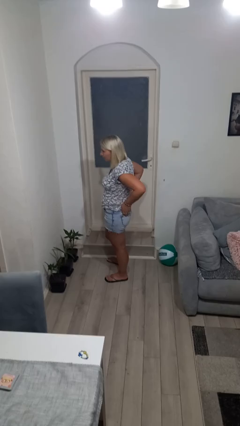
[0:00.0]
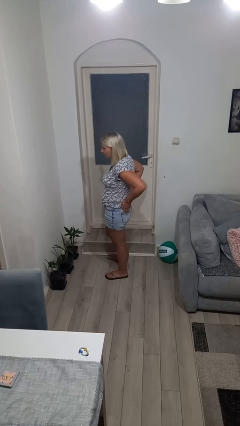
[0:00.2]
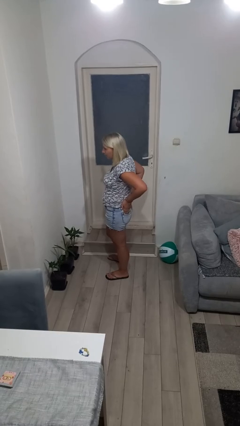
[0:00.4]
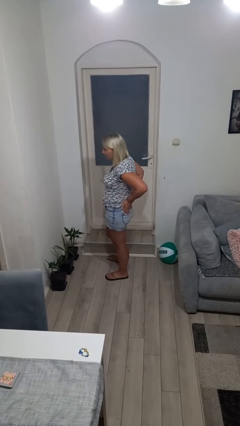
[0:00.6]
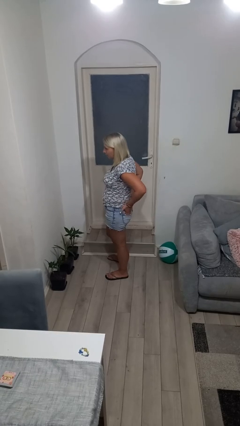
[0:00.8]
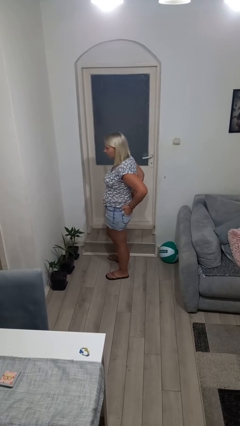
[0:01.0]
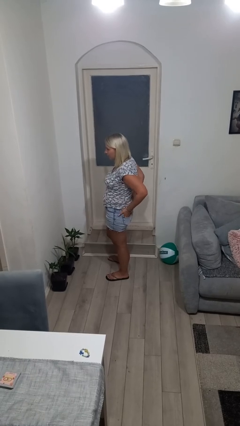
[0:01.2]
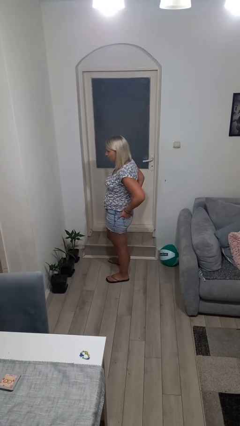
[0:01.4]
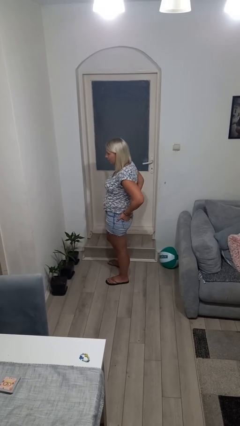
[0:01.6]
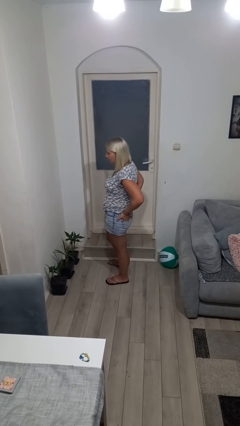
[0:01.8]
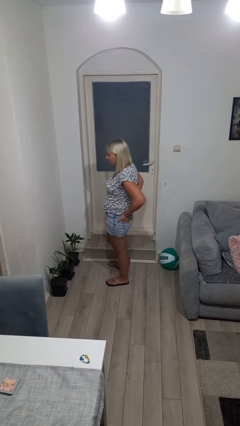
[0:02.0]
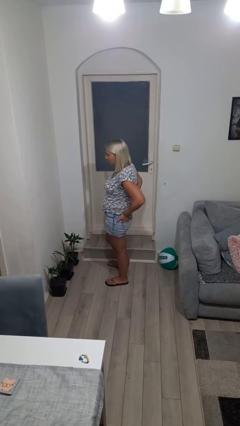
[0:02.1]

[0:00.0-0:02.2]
person puts hands in back pockets

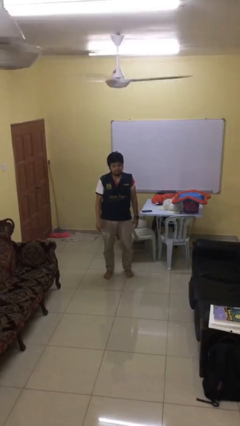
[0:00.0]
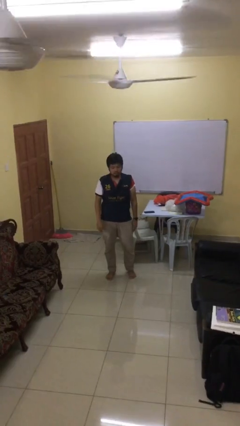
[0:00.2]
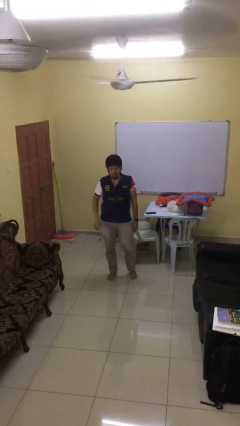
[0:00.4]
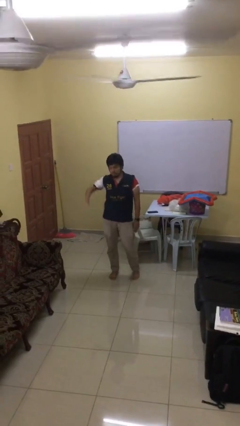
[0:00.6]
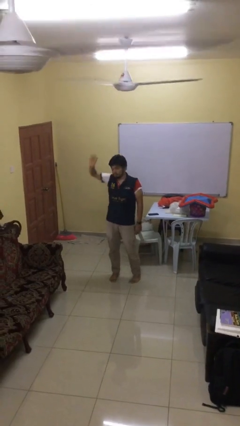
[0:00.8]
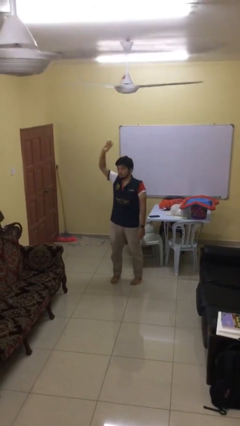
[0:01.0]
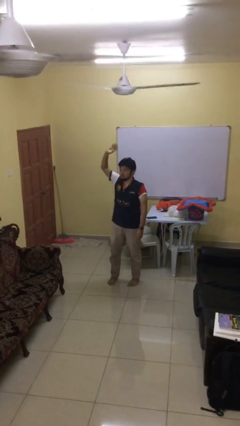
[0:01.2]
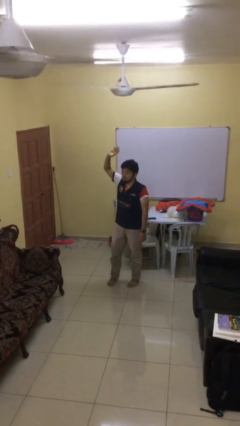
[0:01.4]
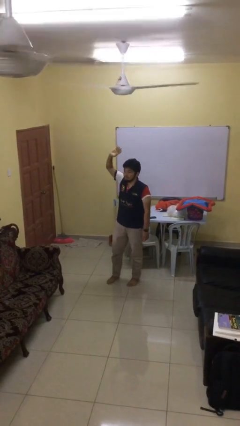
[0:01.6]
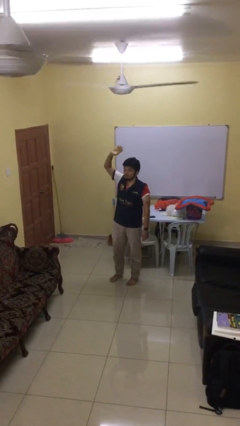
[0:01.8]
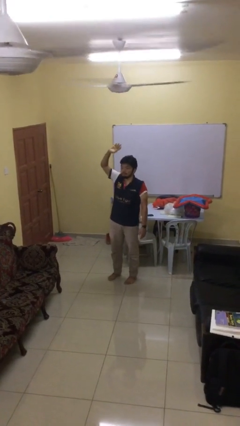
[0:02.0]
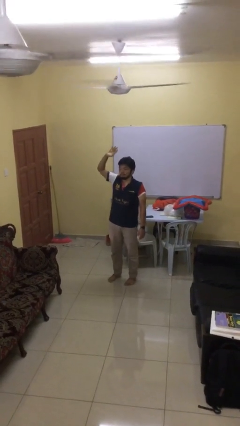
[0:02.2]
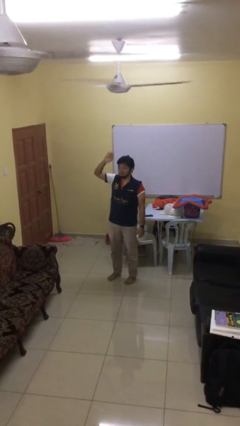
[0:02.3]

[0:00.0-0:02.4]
person gestures raise hand

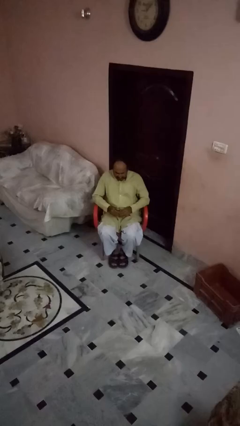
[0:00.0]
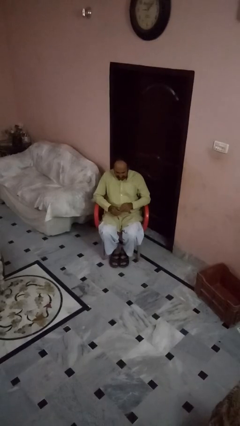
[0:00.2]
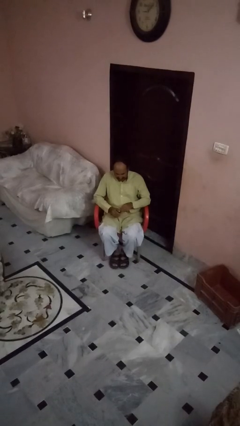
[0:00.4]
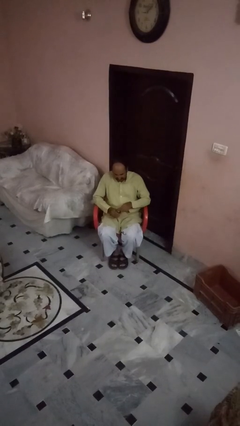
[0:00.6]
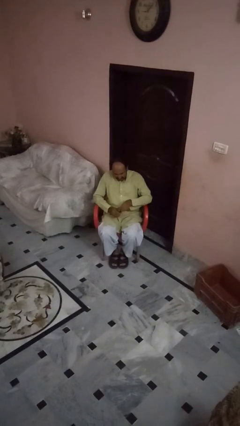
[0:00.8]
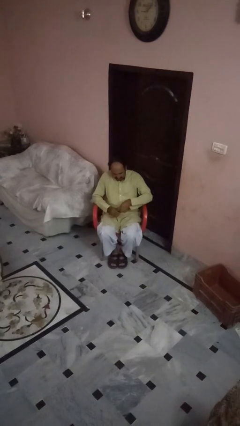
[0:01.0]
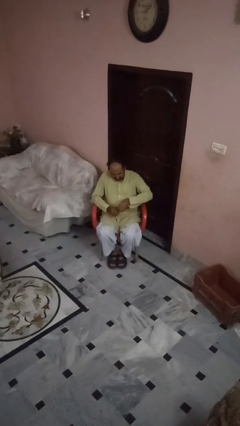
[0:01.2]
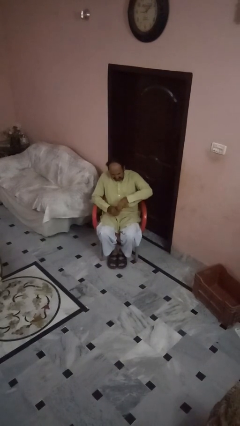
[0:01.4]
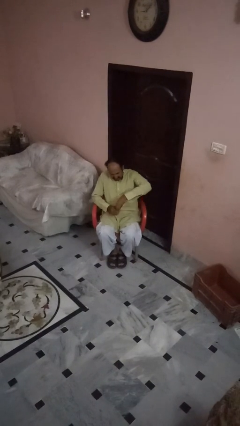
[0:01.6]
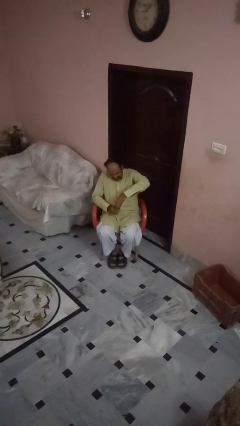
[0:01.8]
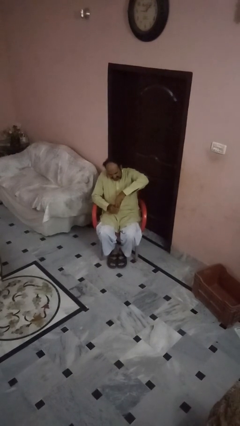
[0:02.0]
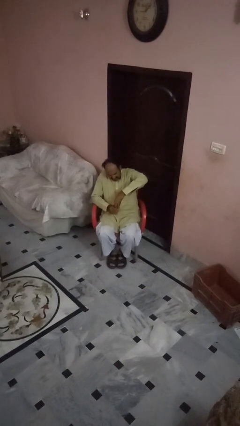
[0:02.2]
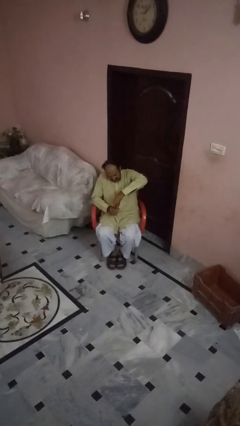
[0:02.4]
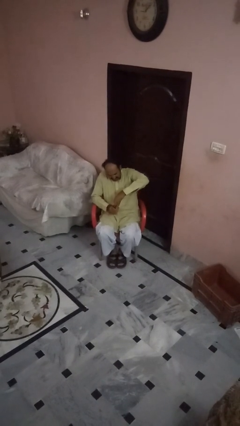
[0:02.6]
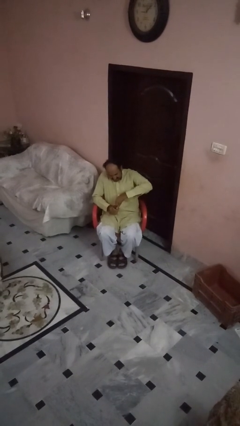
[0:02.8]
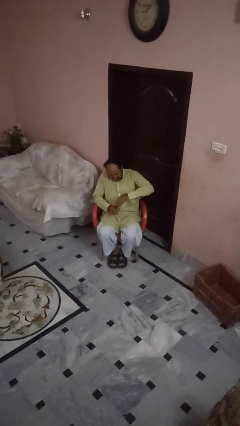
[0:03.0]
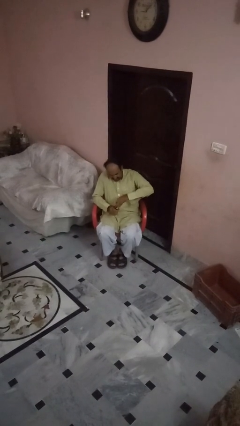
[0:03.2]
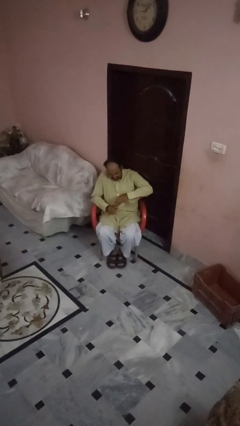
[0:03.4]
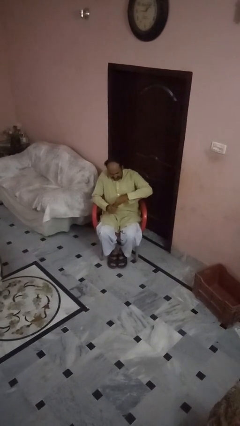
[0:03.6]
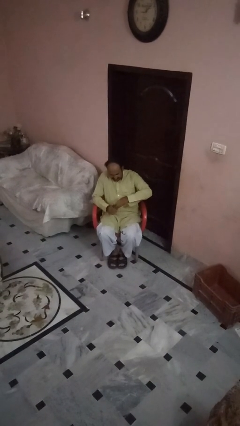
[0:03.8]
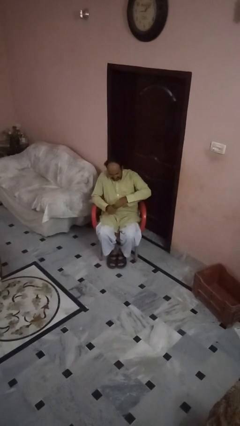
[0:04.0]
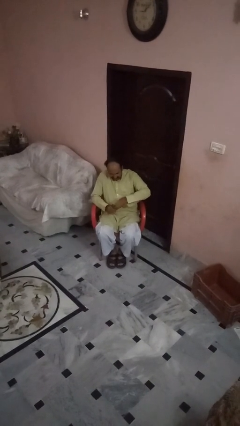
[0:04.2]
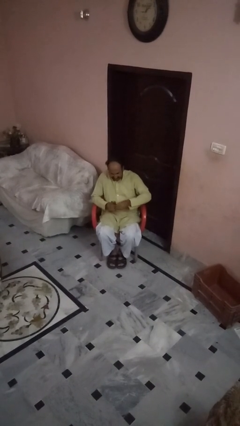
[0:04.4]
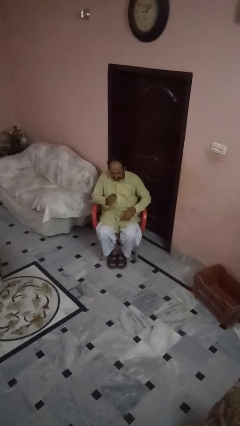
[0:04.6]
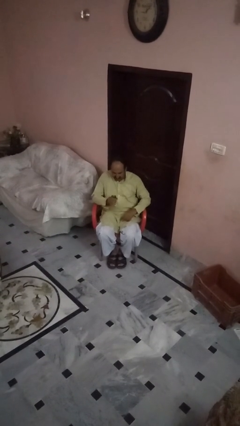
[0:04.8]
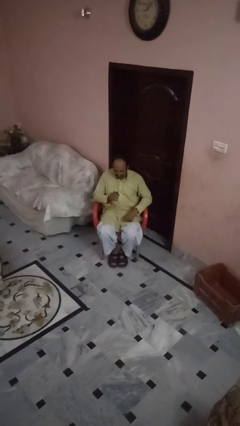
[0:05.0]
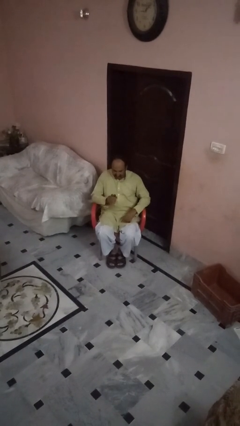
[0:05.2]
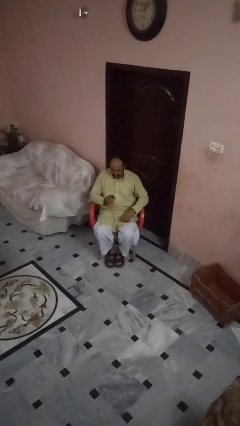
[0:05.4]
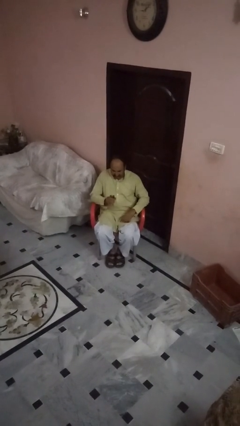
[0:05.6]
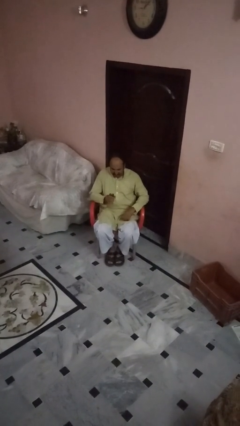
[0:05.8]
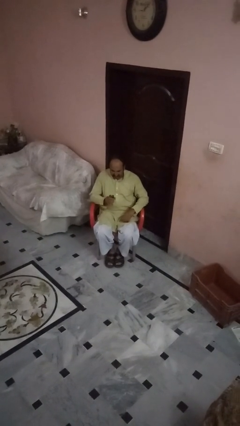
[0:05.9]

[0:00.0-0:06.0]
person opens beverage can

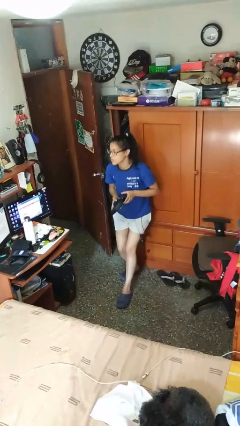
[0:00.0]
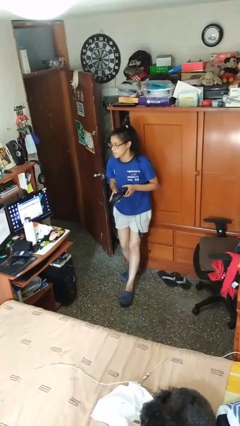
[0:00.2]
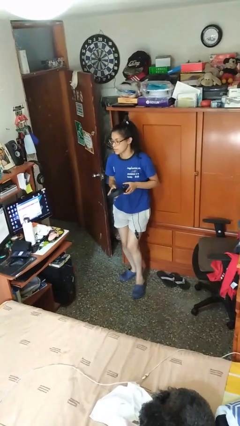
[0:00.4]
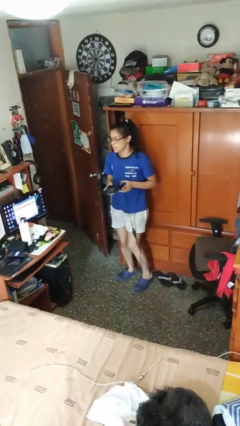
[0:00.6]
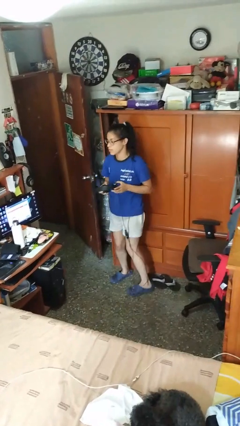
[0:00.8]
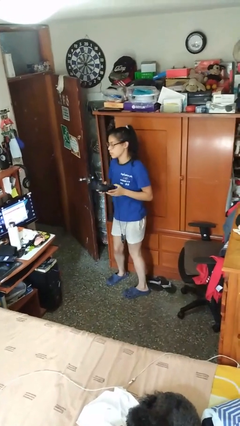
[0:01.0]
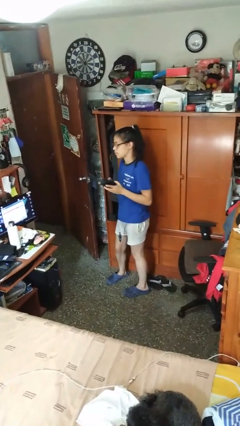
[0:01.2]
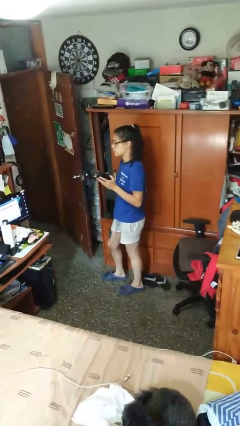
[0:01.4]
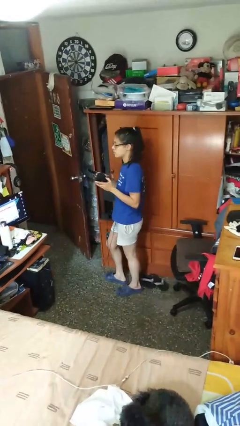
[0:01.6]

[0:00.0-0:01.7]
person takes off headphones

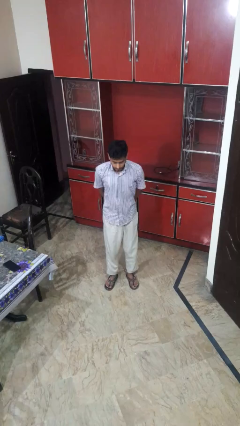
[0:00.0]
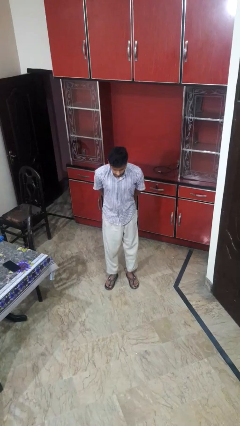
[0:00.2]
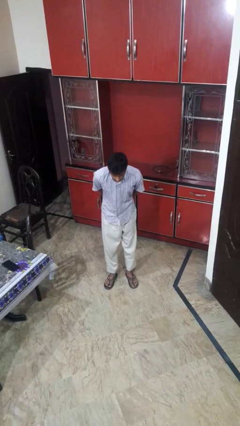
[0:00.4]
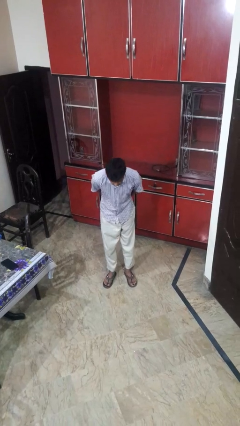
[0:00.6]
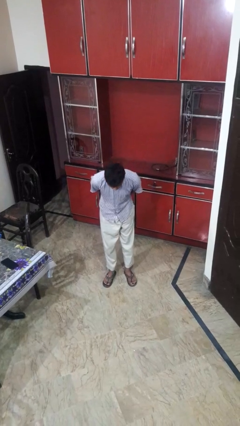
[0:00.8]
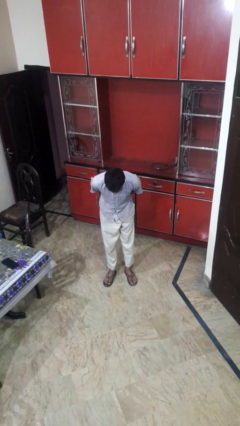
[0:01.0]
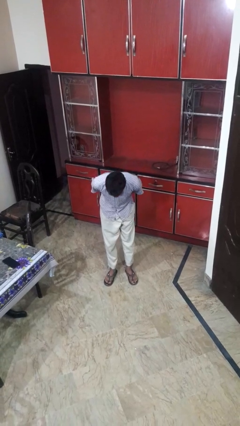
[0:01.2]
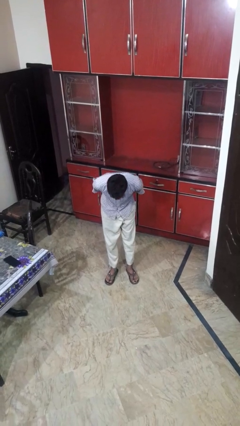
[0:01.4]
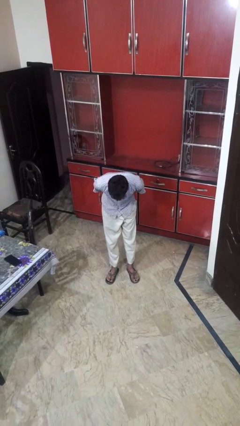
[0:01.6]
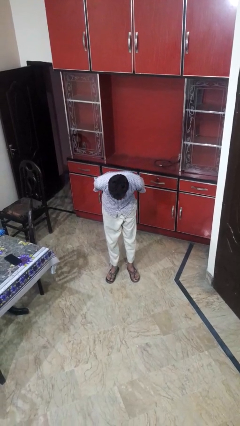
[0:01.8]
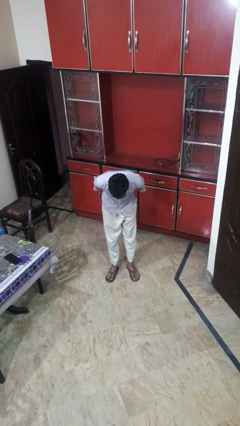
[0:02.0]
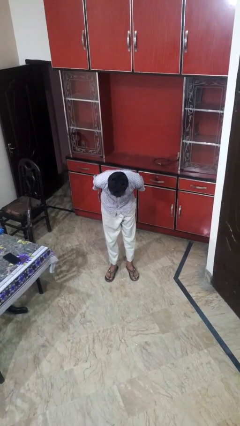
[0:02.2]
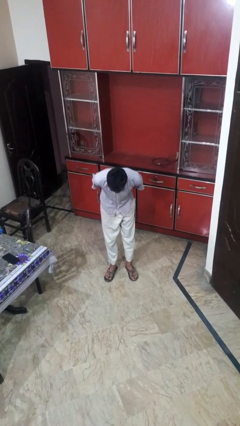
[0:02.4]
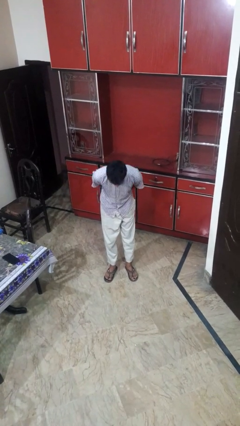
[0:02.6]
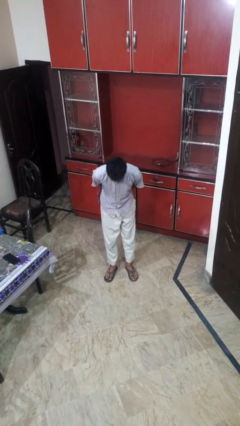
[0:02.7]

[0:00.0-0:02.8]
person bows

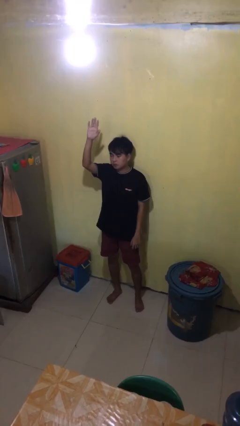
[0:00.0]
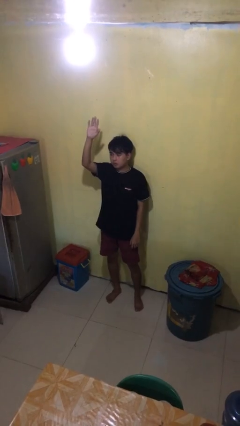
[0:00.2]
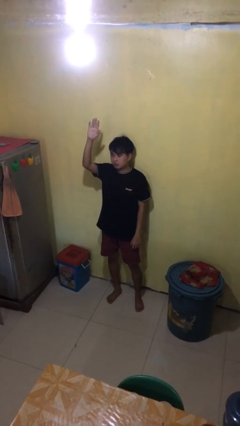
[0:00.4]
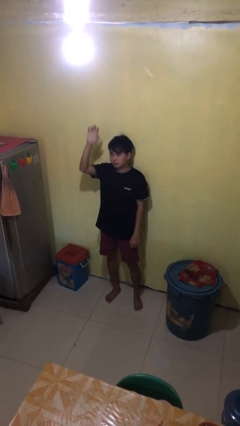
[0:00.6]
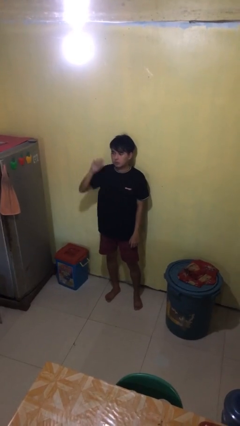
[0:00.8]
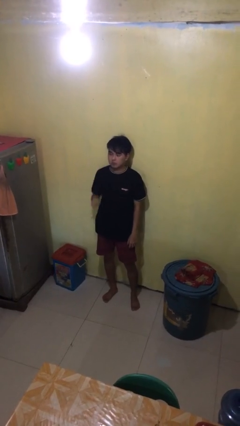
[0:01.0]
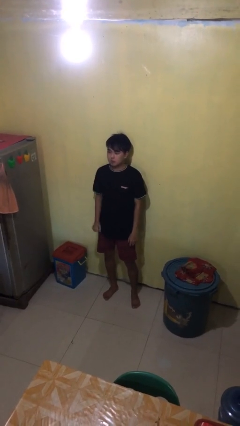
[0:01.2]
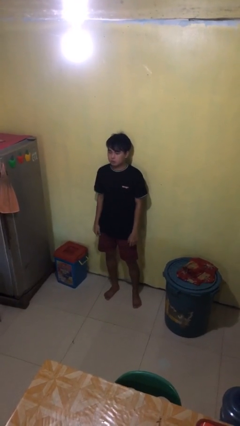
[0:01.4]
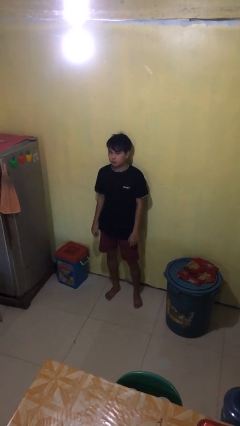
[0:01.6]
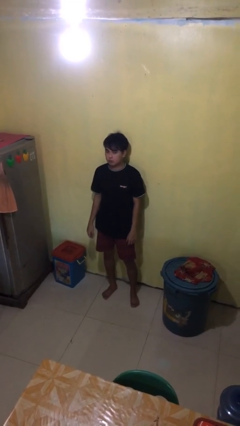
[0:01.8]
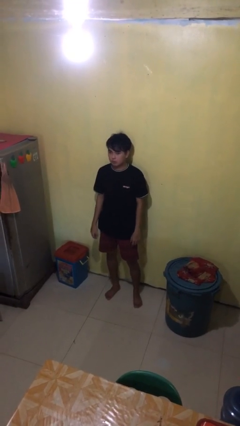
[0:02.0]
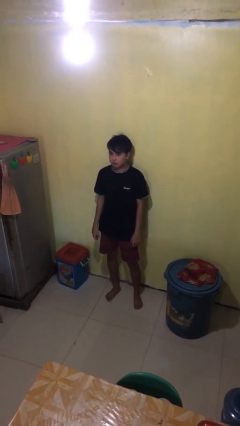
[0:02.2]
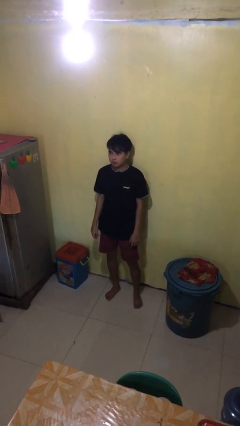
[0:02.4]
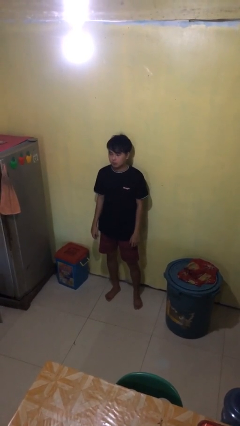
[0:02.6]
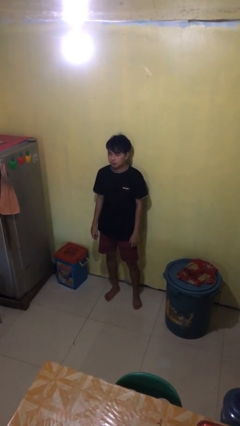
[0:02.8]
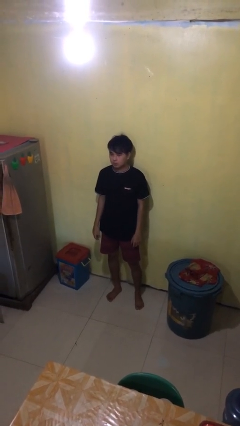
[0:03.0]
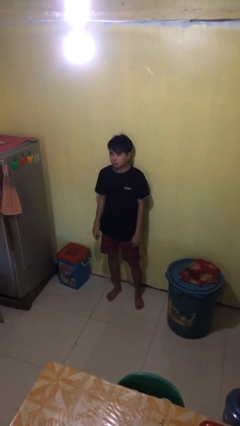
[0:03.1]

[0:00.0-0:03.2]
person gestures lower hand
